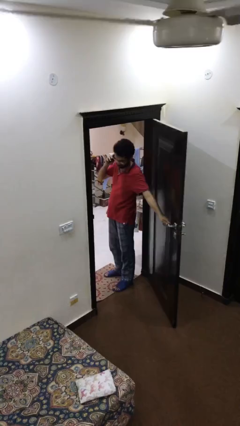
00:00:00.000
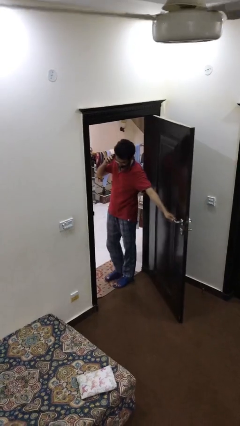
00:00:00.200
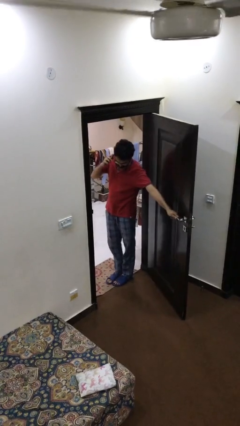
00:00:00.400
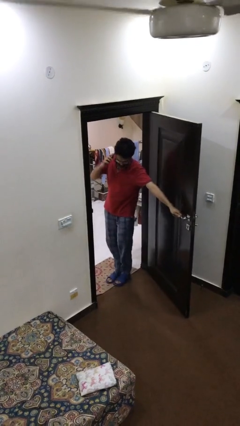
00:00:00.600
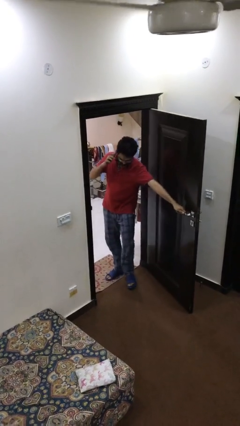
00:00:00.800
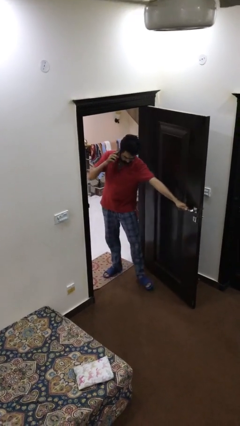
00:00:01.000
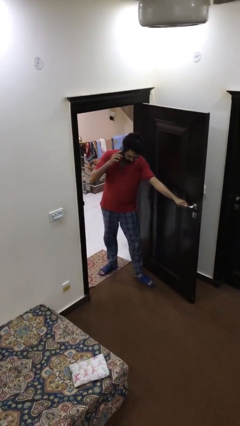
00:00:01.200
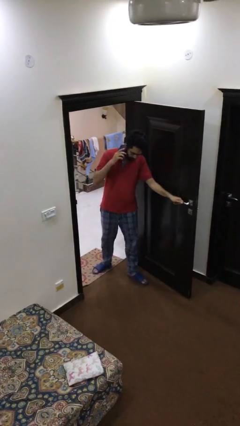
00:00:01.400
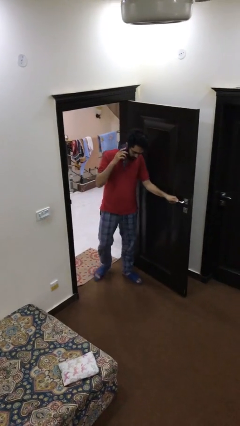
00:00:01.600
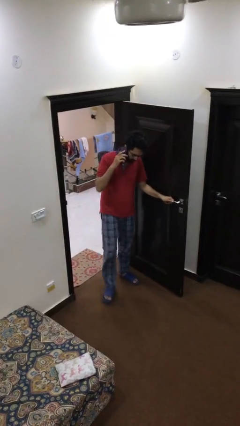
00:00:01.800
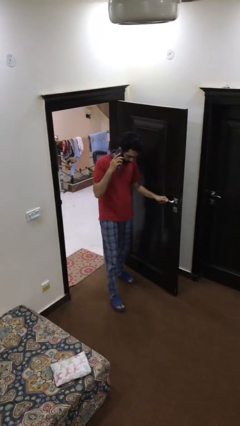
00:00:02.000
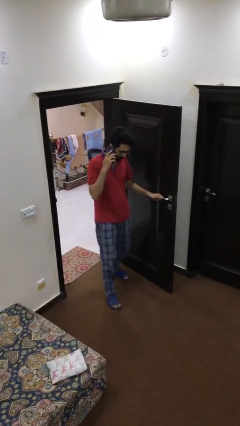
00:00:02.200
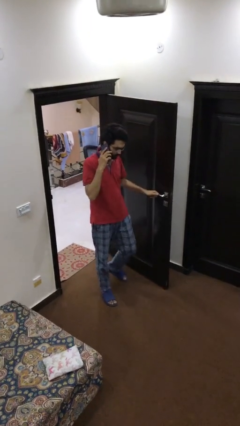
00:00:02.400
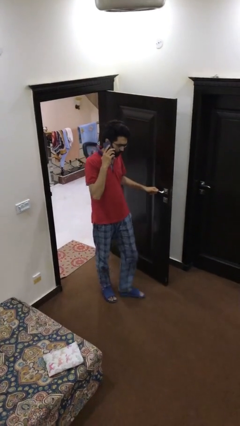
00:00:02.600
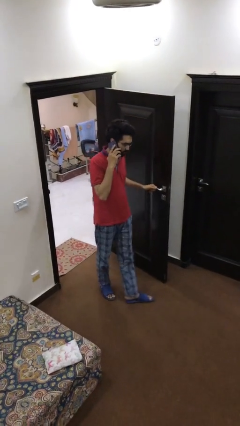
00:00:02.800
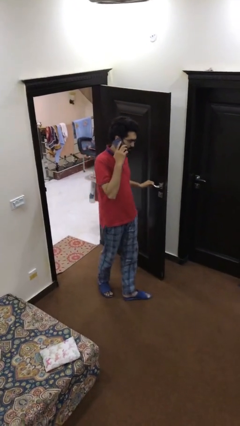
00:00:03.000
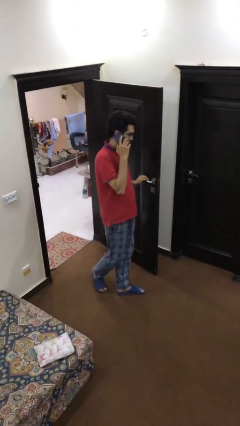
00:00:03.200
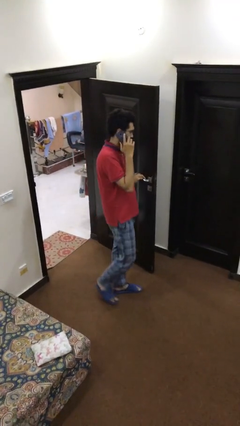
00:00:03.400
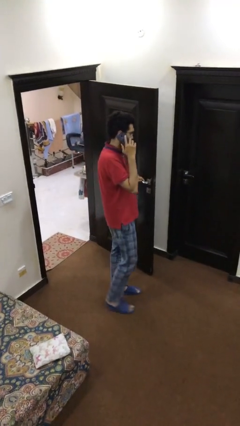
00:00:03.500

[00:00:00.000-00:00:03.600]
person enters scene through structure

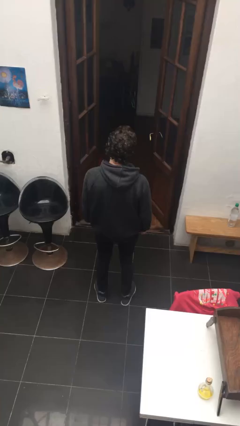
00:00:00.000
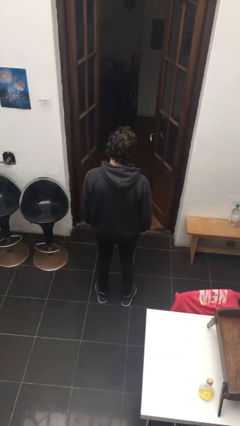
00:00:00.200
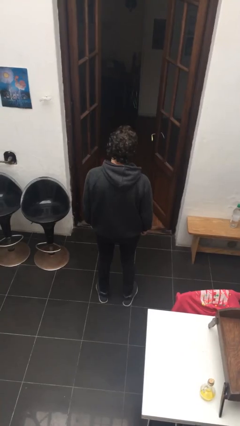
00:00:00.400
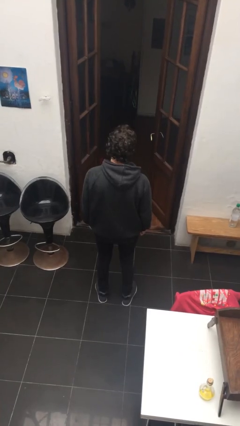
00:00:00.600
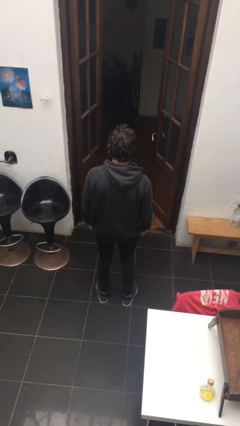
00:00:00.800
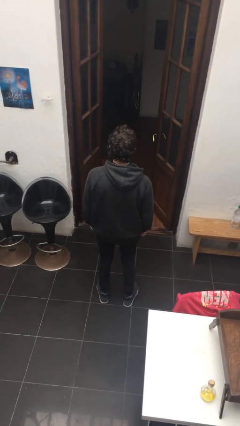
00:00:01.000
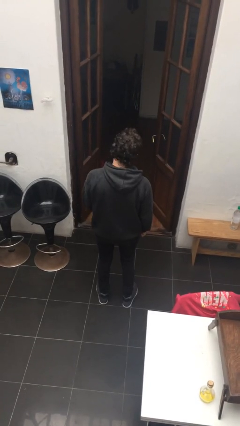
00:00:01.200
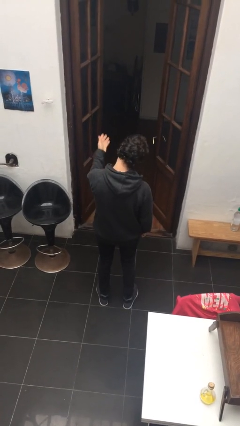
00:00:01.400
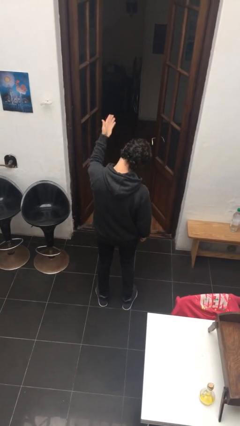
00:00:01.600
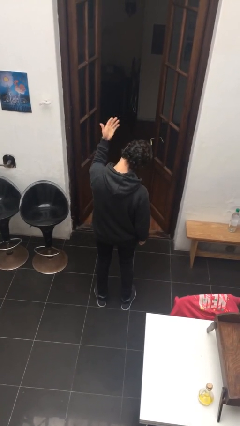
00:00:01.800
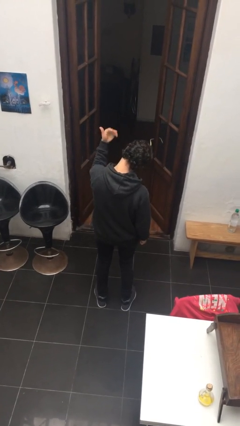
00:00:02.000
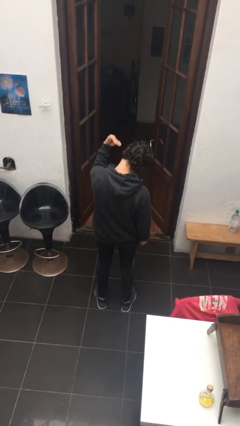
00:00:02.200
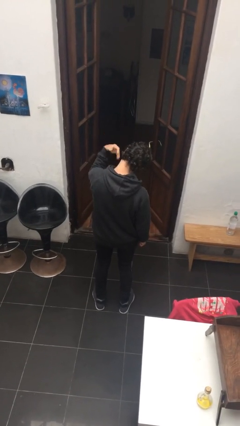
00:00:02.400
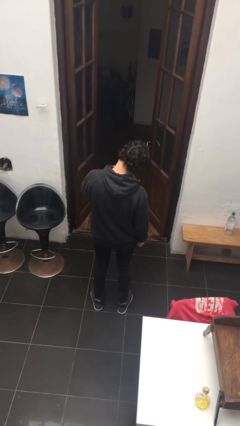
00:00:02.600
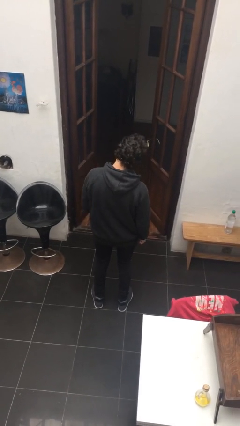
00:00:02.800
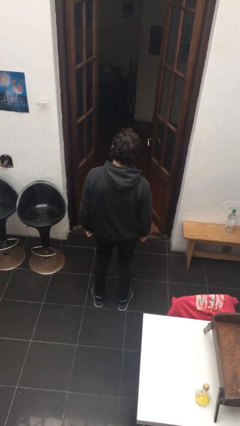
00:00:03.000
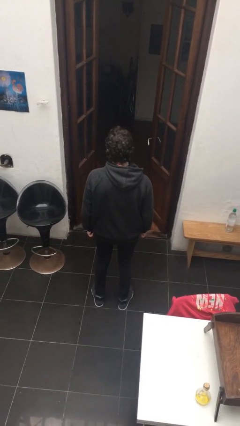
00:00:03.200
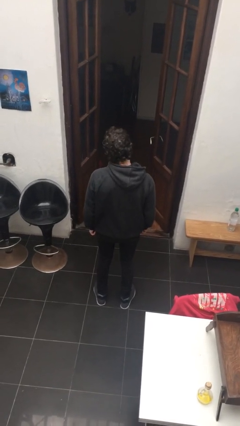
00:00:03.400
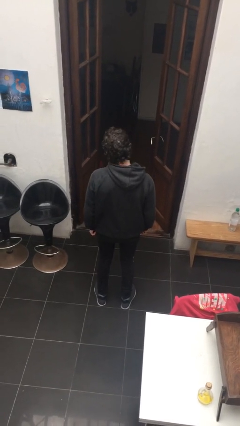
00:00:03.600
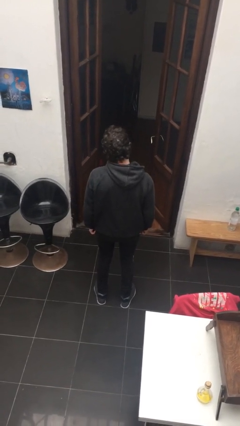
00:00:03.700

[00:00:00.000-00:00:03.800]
person gestures come here

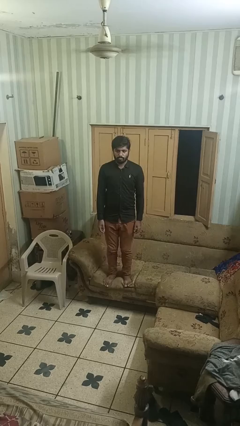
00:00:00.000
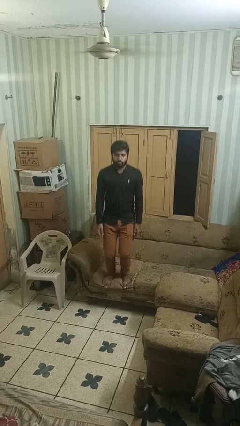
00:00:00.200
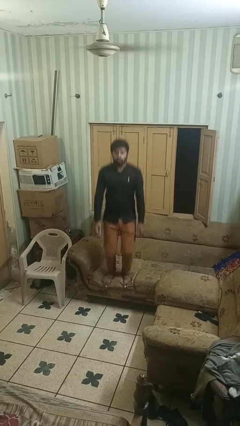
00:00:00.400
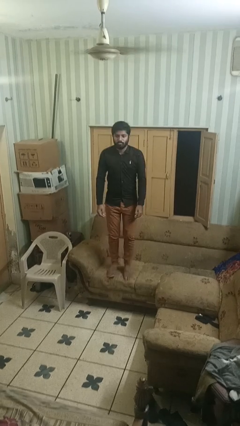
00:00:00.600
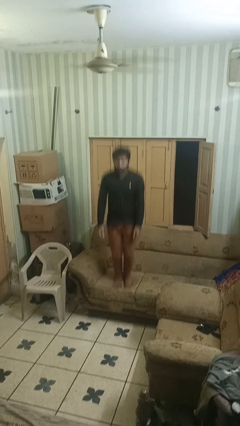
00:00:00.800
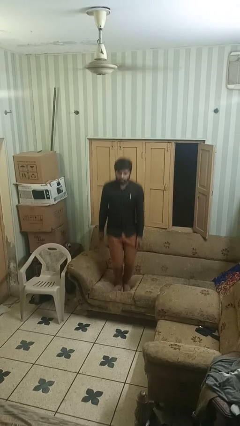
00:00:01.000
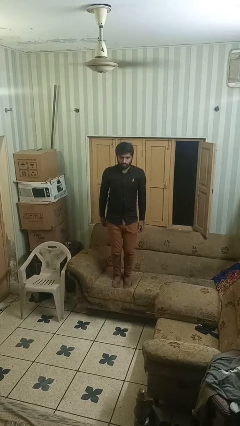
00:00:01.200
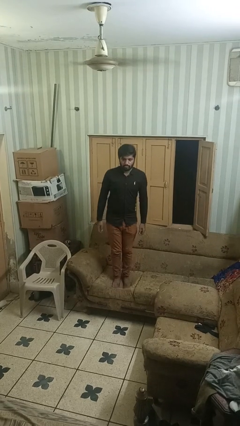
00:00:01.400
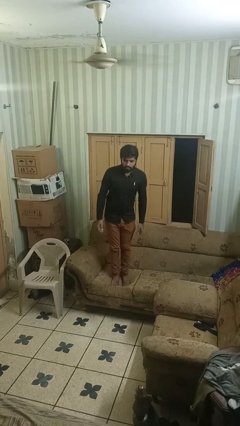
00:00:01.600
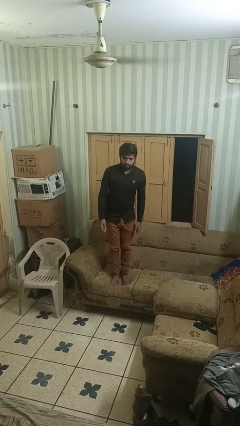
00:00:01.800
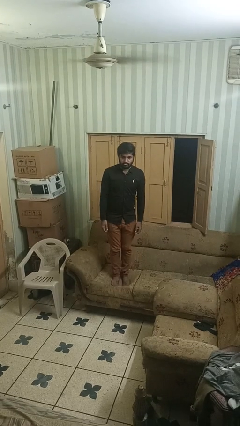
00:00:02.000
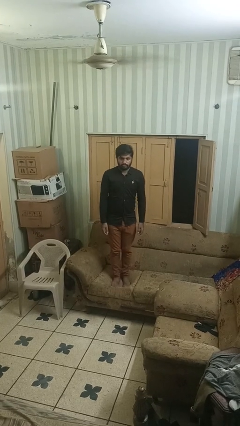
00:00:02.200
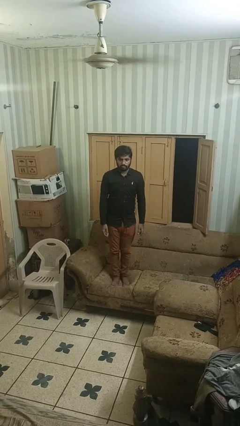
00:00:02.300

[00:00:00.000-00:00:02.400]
person jumps on couch

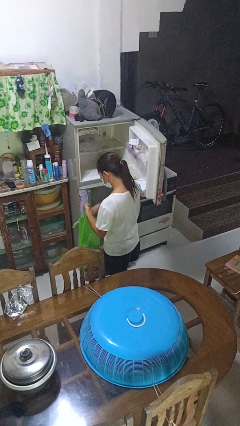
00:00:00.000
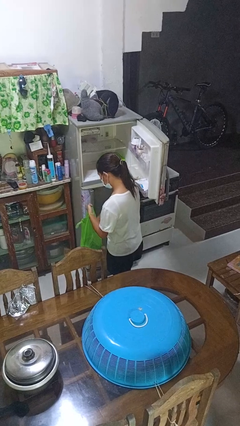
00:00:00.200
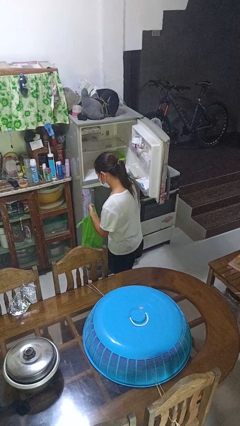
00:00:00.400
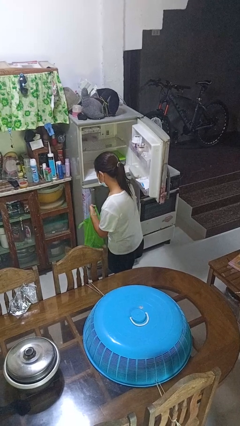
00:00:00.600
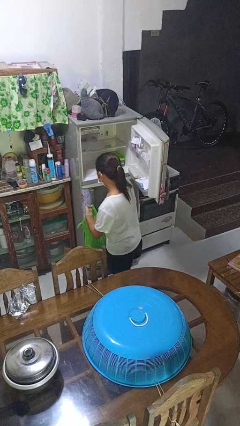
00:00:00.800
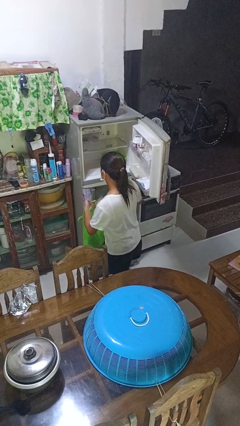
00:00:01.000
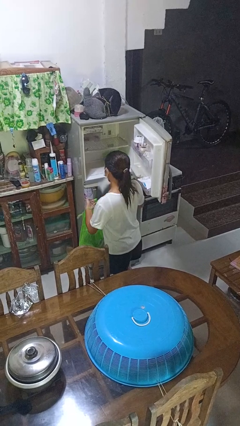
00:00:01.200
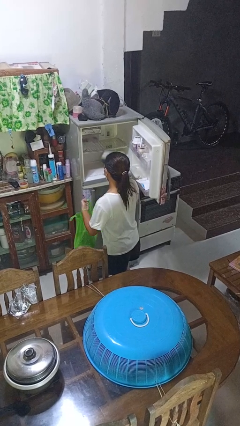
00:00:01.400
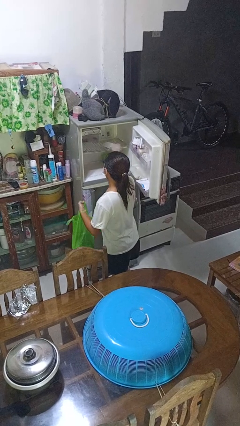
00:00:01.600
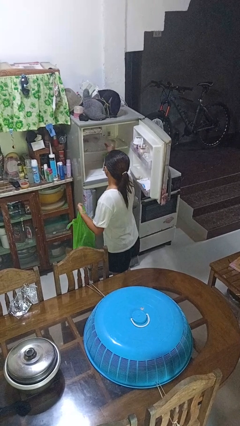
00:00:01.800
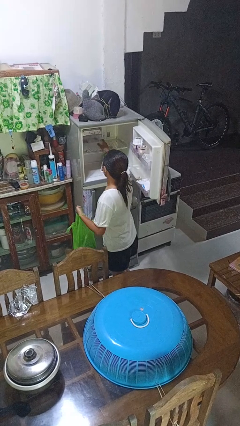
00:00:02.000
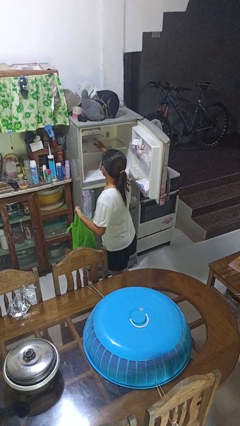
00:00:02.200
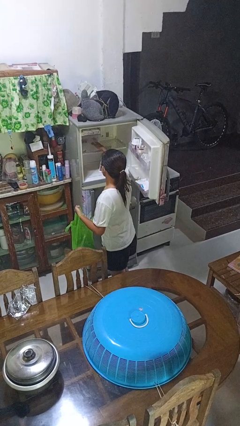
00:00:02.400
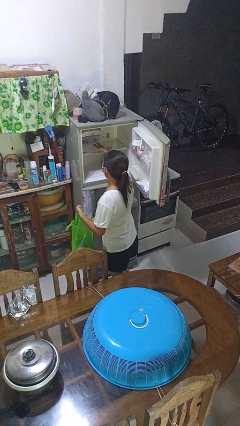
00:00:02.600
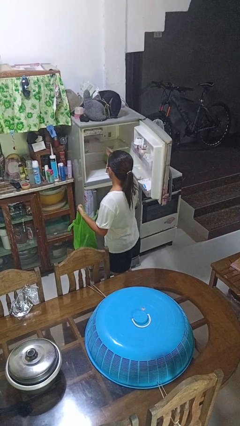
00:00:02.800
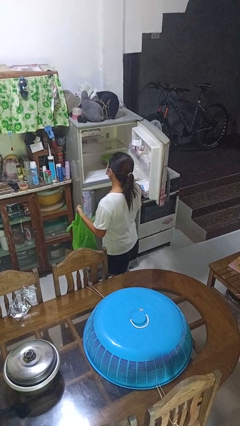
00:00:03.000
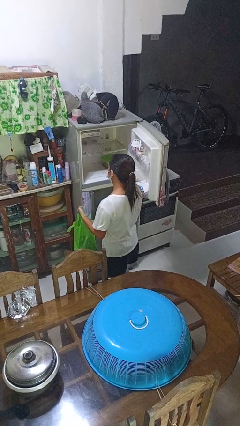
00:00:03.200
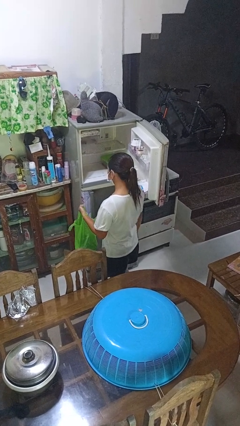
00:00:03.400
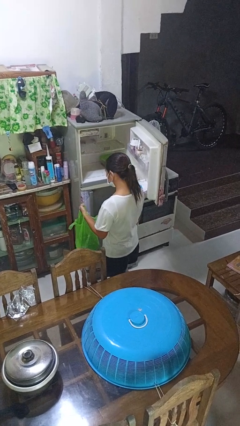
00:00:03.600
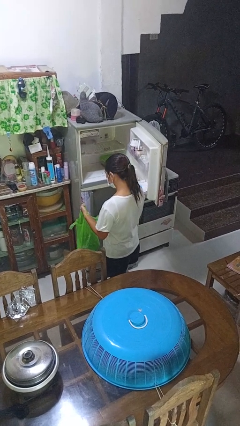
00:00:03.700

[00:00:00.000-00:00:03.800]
person loads groceries into refrigerator

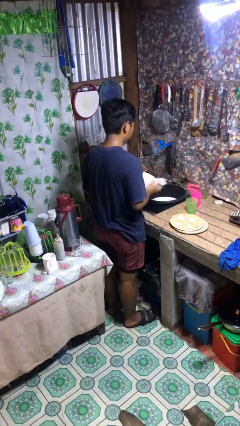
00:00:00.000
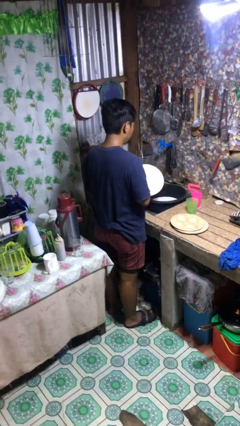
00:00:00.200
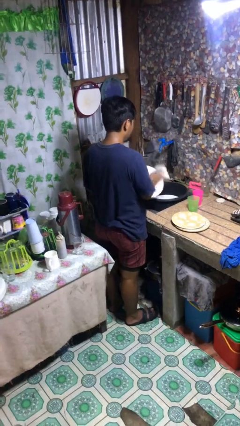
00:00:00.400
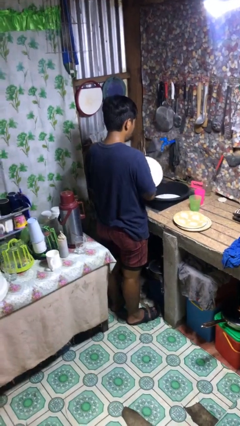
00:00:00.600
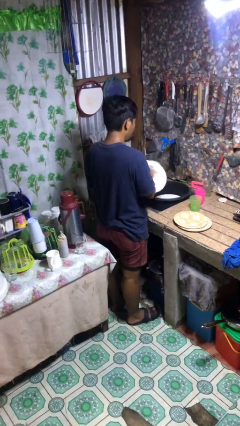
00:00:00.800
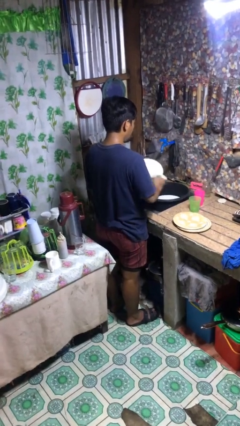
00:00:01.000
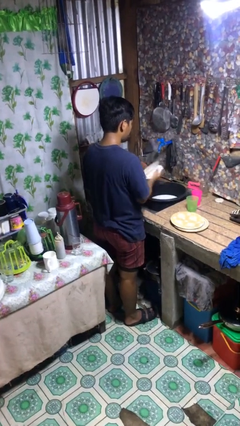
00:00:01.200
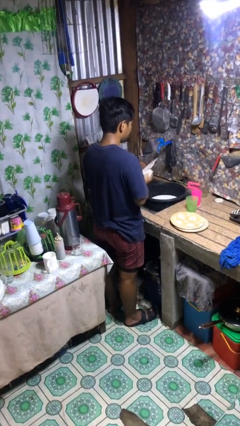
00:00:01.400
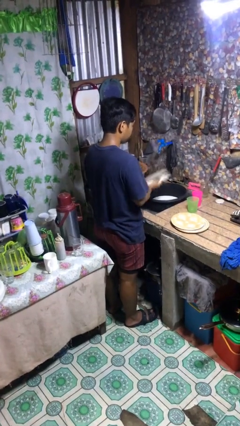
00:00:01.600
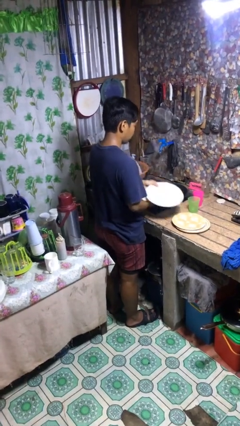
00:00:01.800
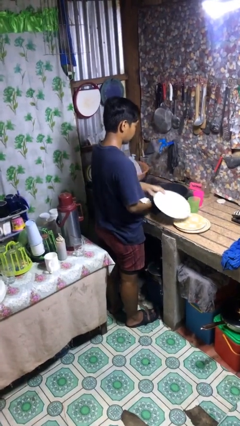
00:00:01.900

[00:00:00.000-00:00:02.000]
person dries dish

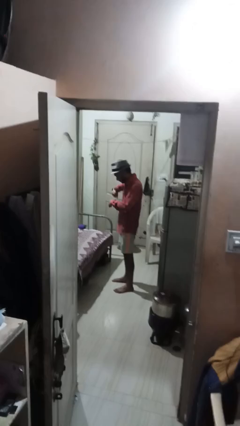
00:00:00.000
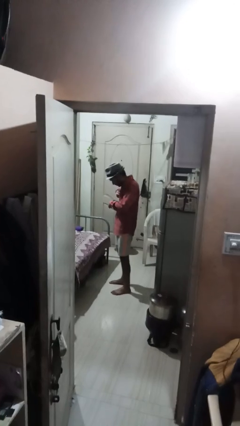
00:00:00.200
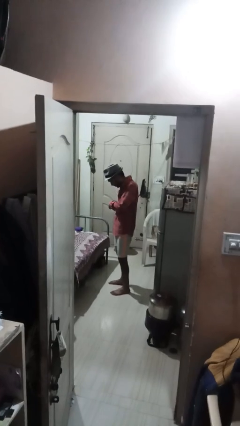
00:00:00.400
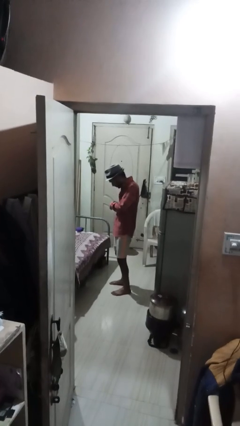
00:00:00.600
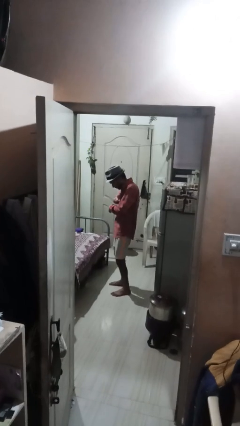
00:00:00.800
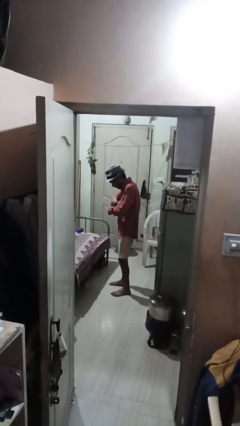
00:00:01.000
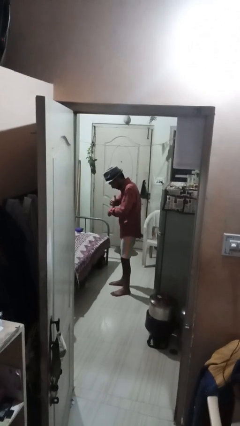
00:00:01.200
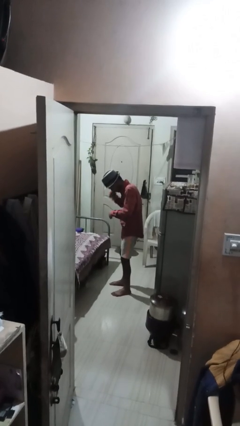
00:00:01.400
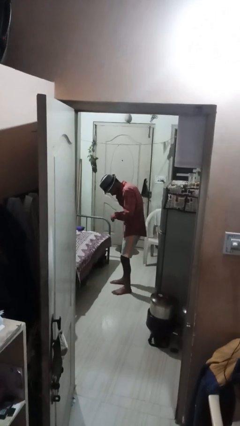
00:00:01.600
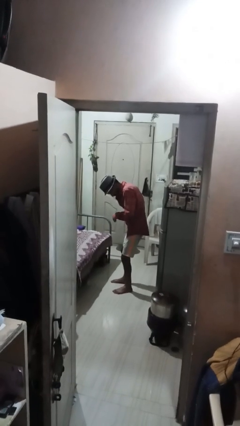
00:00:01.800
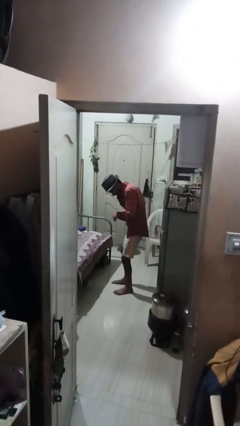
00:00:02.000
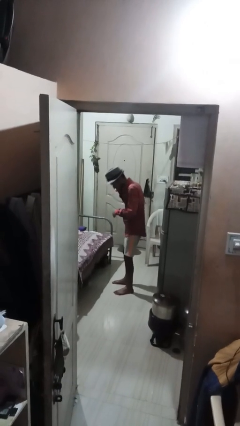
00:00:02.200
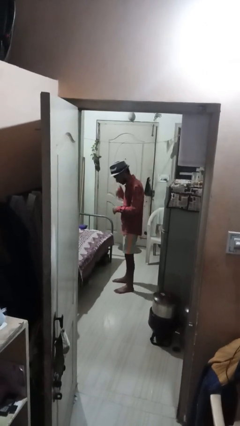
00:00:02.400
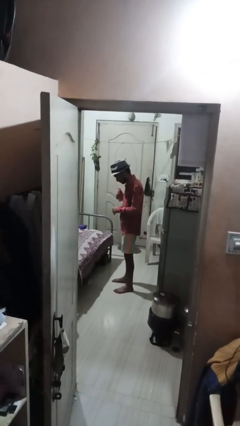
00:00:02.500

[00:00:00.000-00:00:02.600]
person applies deodorant
